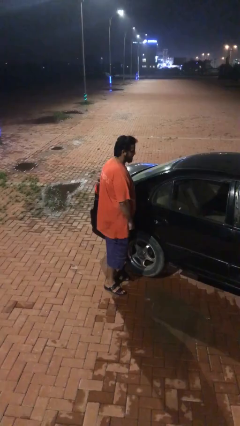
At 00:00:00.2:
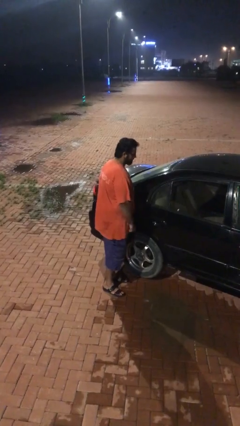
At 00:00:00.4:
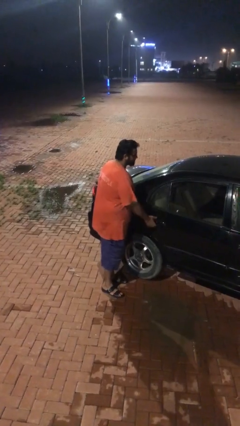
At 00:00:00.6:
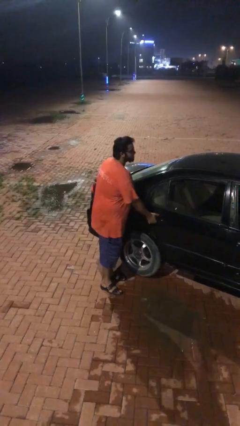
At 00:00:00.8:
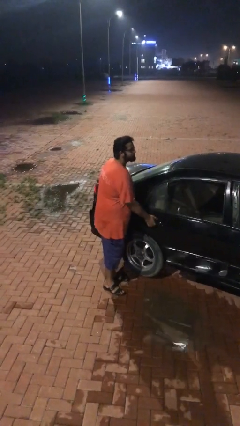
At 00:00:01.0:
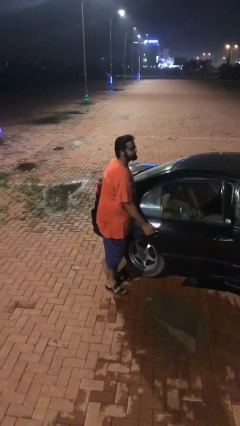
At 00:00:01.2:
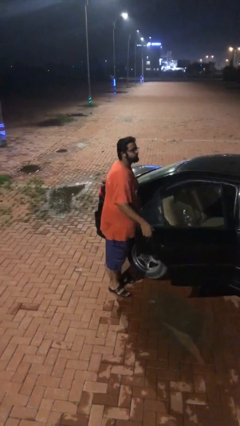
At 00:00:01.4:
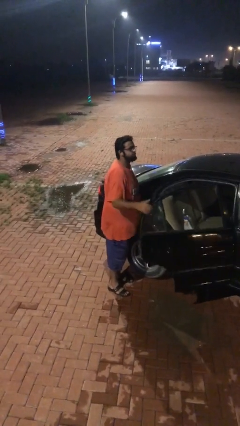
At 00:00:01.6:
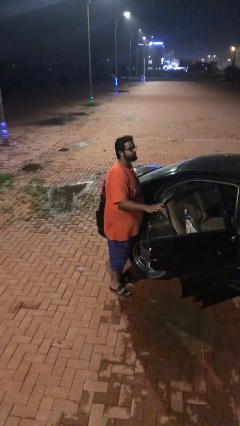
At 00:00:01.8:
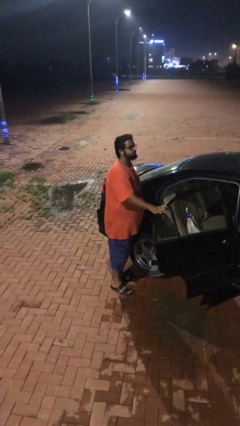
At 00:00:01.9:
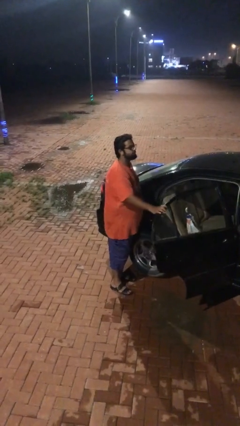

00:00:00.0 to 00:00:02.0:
person opens car door

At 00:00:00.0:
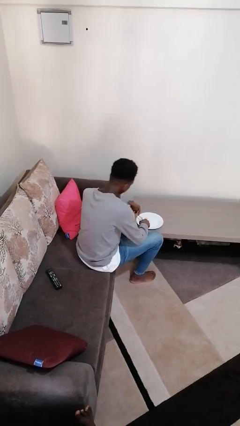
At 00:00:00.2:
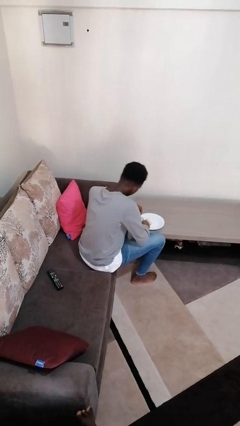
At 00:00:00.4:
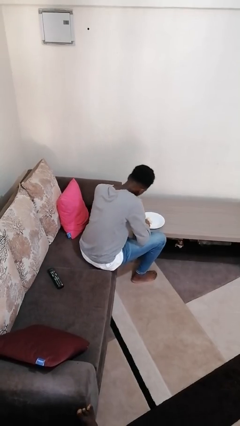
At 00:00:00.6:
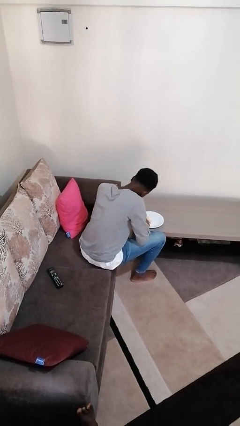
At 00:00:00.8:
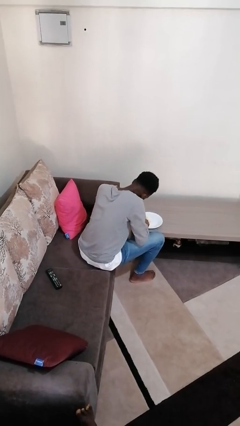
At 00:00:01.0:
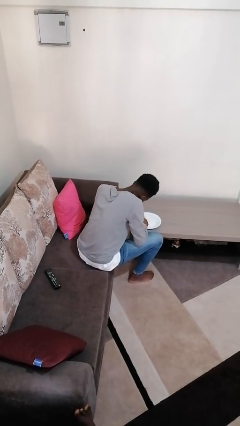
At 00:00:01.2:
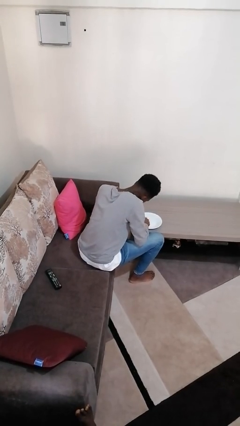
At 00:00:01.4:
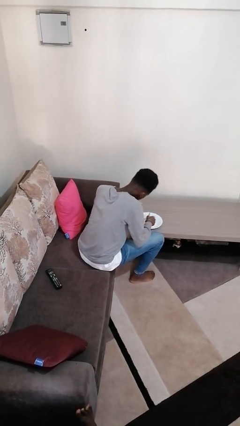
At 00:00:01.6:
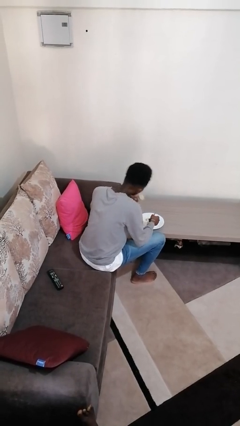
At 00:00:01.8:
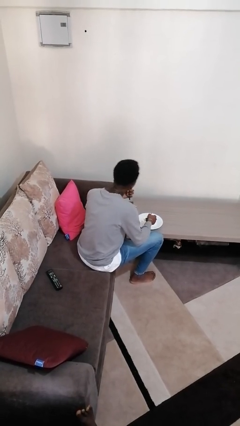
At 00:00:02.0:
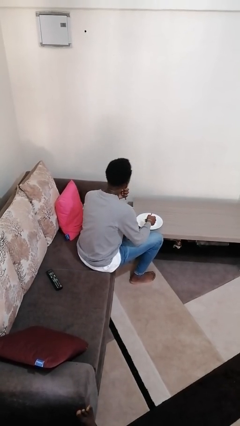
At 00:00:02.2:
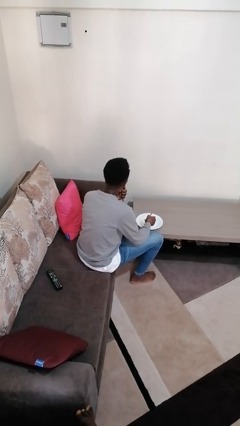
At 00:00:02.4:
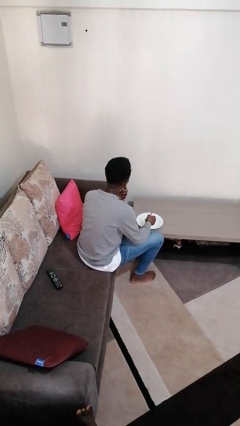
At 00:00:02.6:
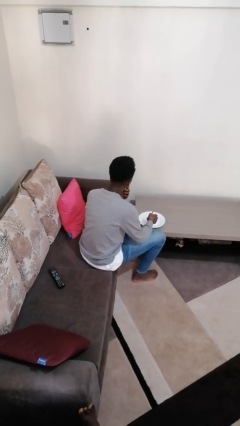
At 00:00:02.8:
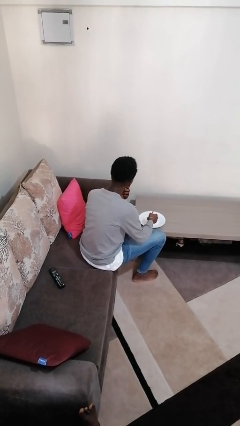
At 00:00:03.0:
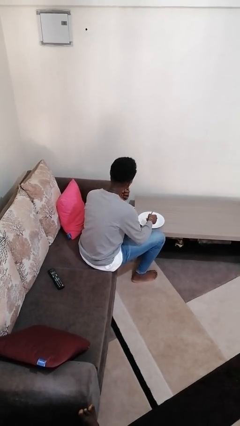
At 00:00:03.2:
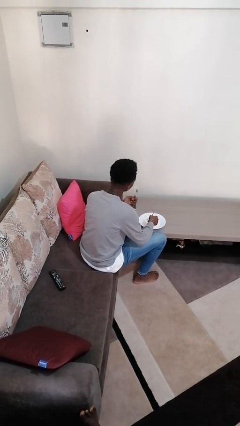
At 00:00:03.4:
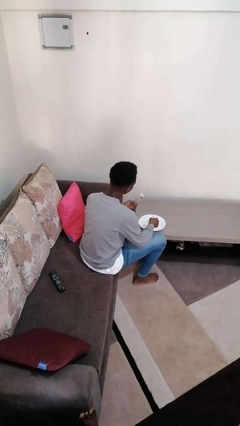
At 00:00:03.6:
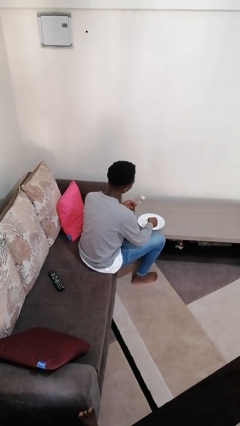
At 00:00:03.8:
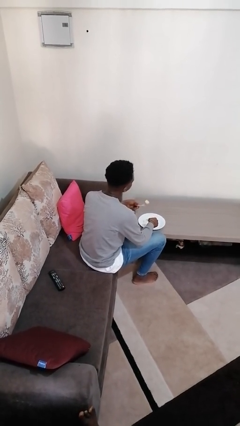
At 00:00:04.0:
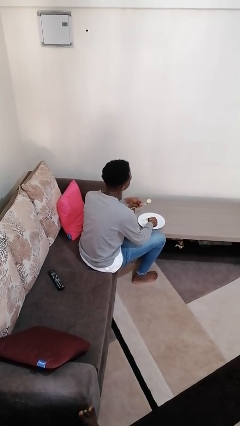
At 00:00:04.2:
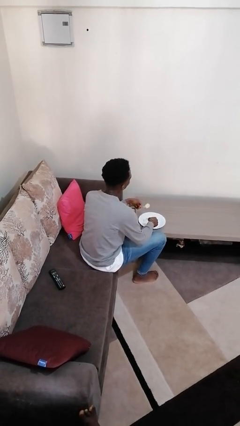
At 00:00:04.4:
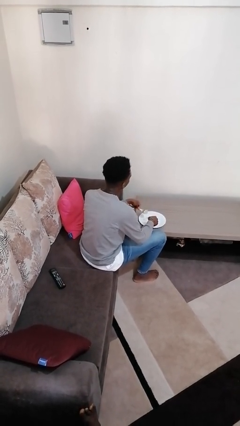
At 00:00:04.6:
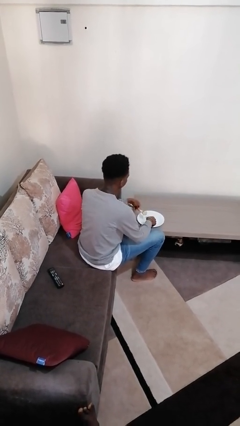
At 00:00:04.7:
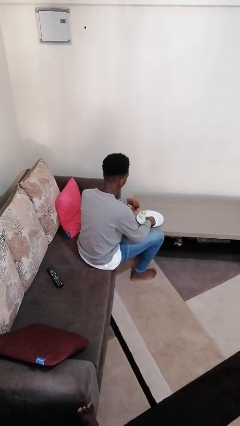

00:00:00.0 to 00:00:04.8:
person eats with utensil

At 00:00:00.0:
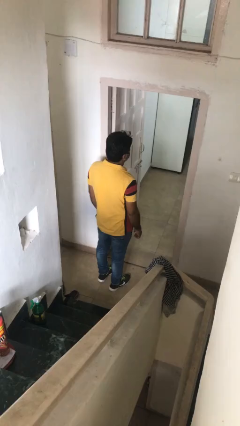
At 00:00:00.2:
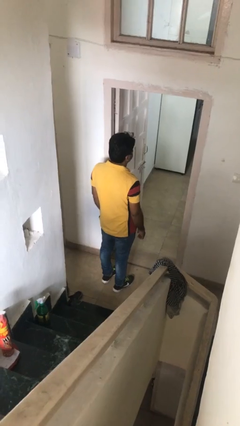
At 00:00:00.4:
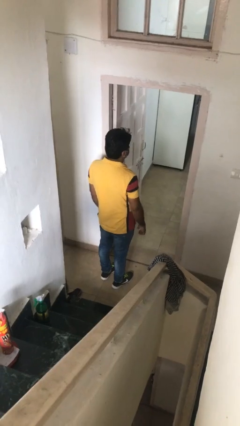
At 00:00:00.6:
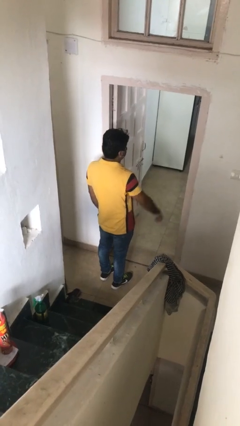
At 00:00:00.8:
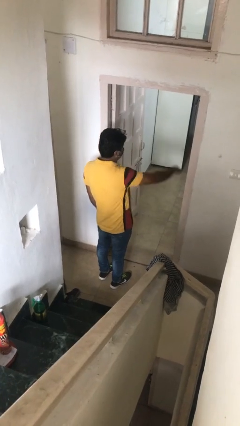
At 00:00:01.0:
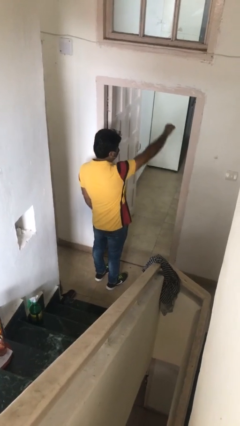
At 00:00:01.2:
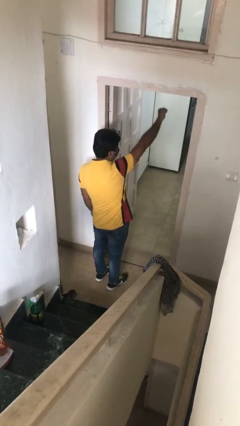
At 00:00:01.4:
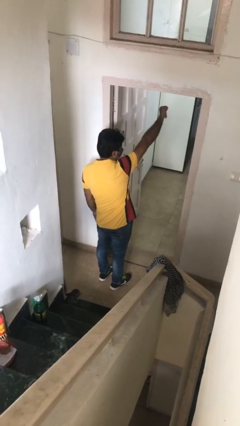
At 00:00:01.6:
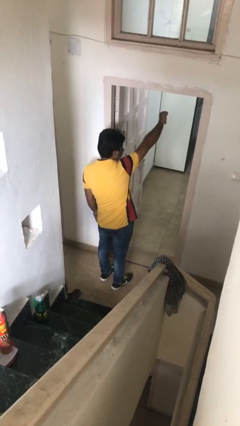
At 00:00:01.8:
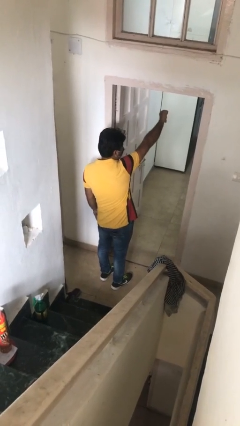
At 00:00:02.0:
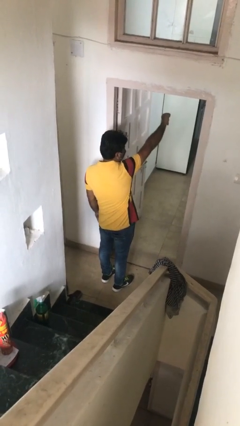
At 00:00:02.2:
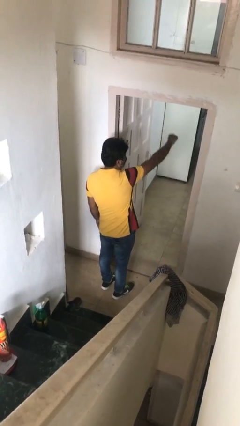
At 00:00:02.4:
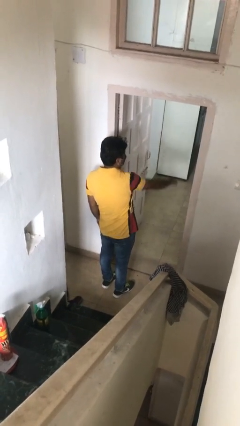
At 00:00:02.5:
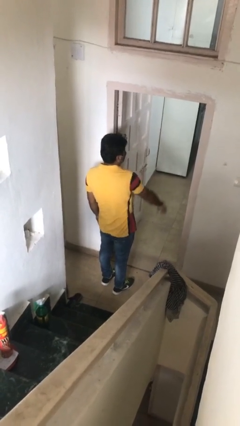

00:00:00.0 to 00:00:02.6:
person gestures thumbs down

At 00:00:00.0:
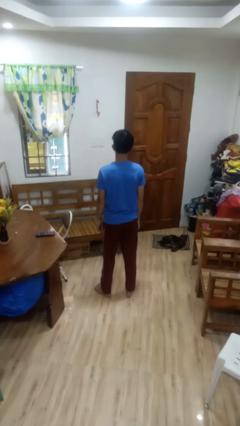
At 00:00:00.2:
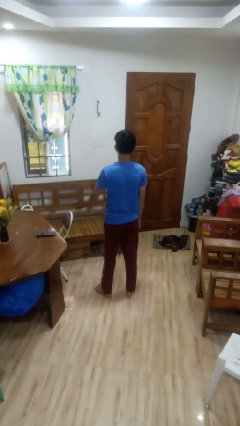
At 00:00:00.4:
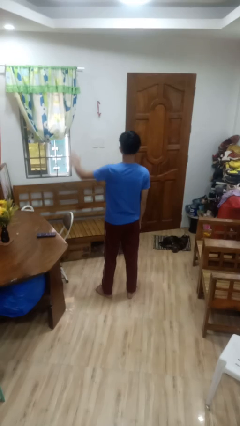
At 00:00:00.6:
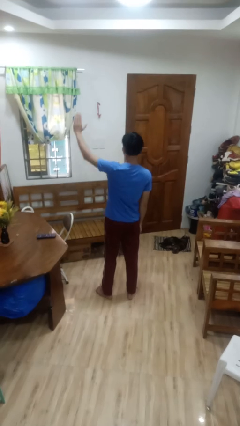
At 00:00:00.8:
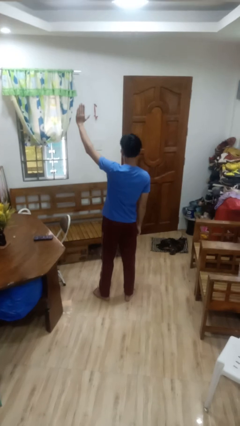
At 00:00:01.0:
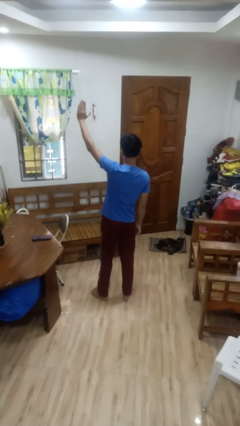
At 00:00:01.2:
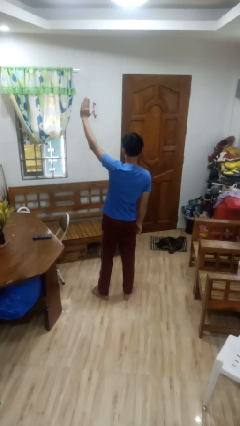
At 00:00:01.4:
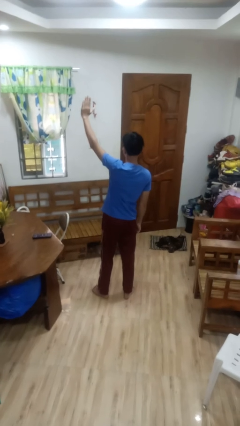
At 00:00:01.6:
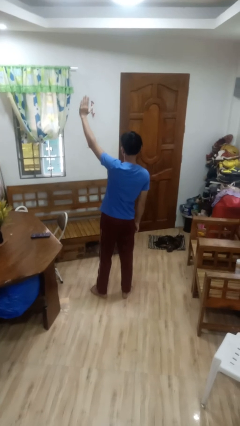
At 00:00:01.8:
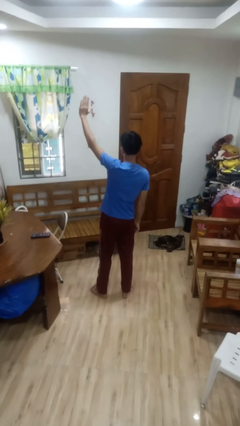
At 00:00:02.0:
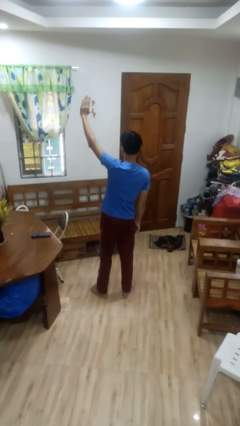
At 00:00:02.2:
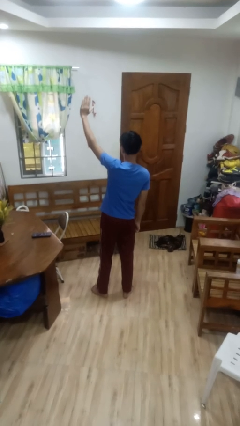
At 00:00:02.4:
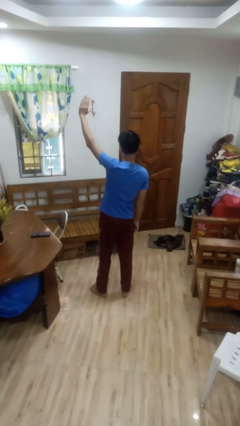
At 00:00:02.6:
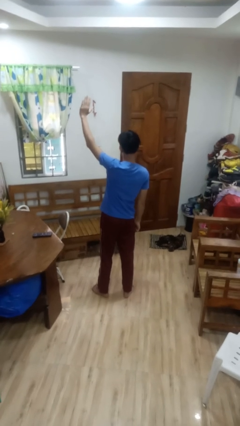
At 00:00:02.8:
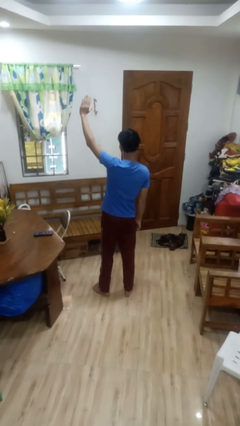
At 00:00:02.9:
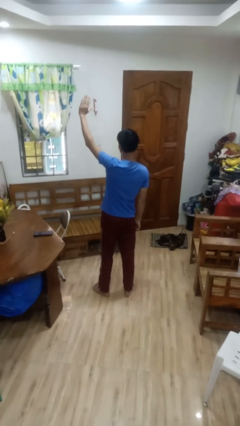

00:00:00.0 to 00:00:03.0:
person gestures raise hand

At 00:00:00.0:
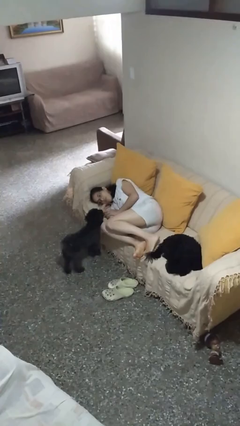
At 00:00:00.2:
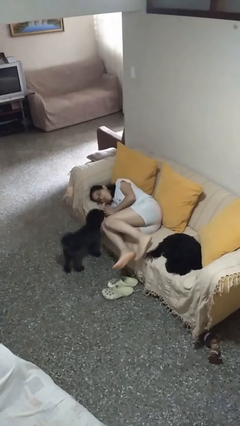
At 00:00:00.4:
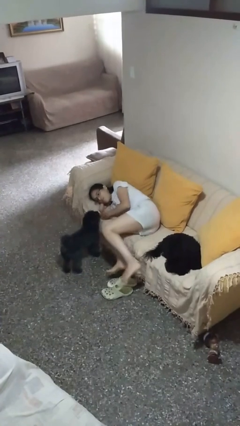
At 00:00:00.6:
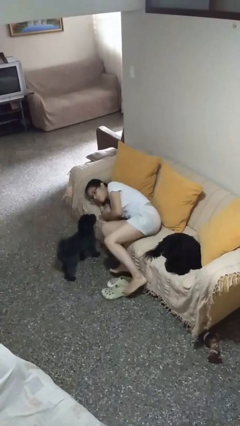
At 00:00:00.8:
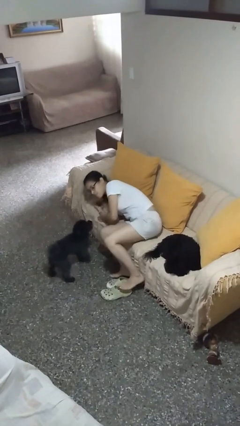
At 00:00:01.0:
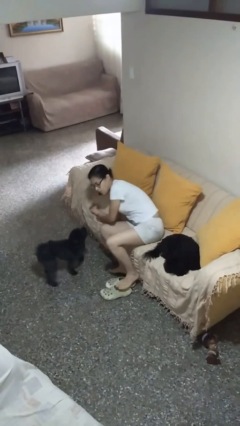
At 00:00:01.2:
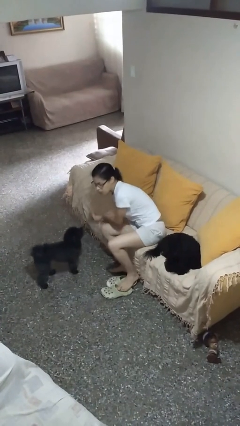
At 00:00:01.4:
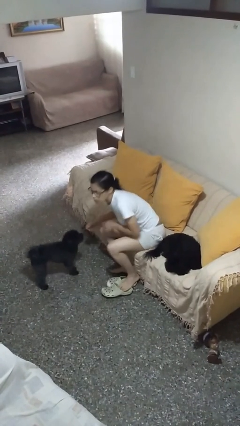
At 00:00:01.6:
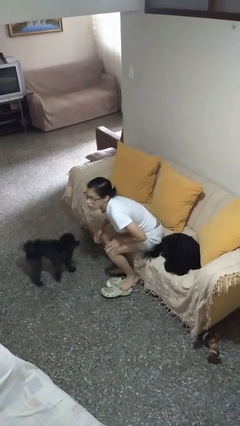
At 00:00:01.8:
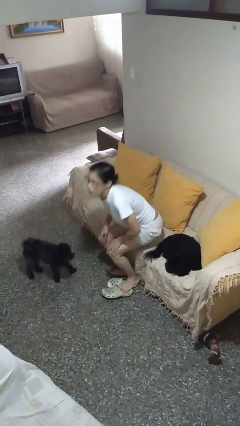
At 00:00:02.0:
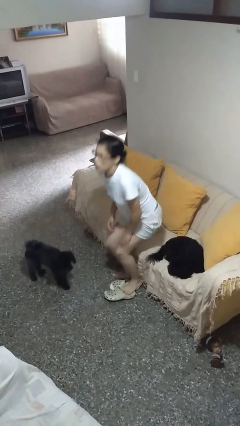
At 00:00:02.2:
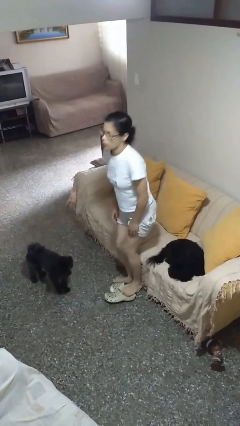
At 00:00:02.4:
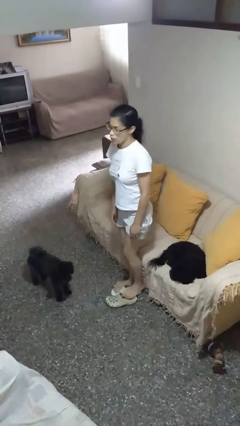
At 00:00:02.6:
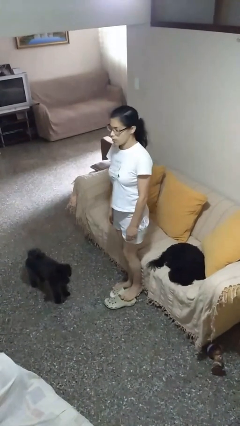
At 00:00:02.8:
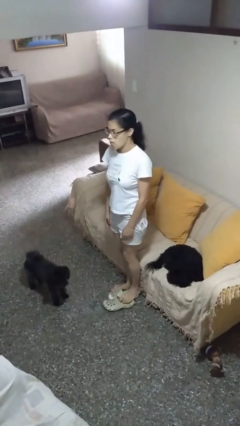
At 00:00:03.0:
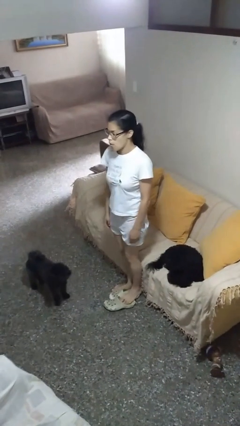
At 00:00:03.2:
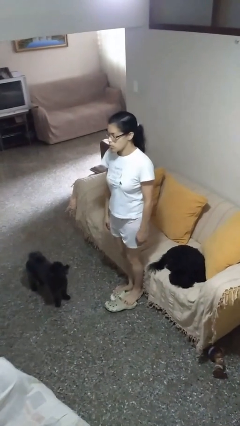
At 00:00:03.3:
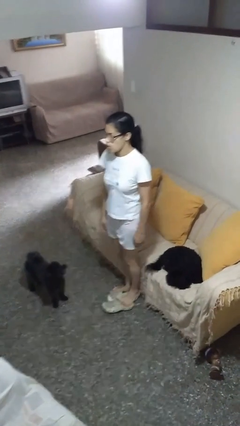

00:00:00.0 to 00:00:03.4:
person stands up

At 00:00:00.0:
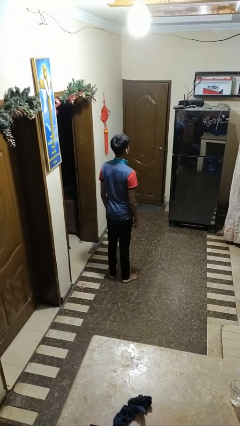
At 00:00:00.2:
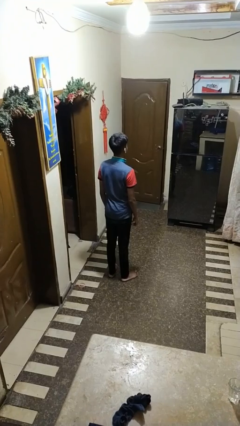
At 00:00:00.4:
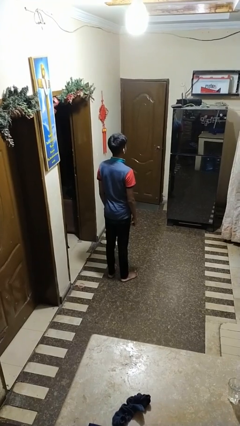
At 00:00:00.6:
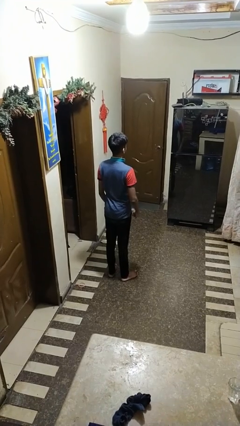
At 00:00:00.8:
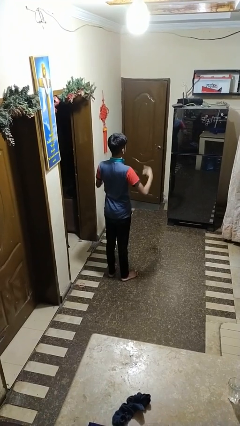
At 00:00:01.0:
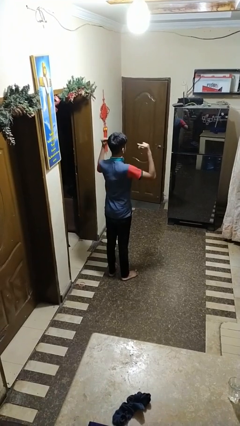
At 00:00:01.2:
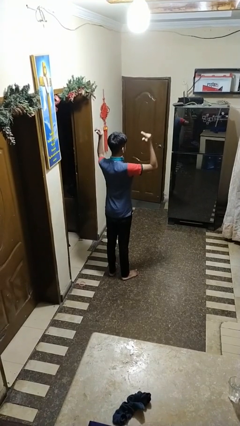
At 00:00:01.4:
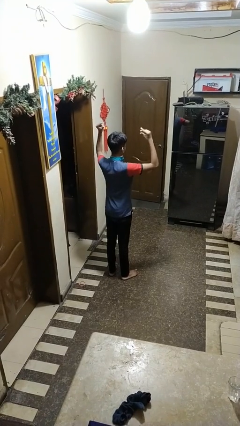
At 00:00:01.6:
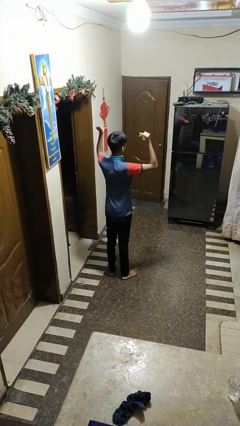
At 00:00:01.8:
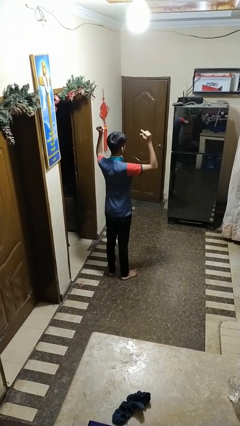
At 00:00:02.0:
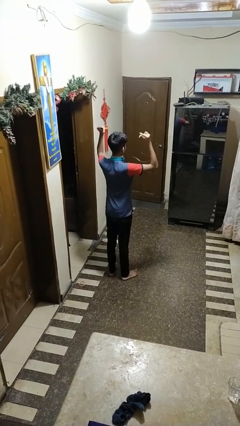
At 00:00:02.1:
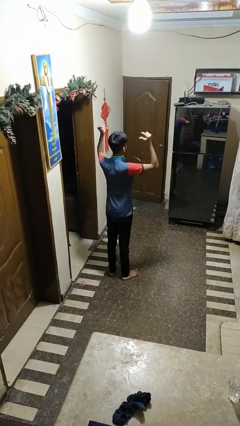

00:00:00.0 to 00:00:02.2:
person snaps fingers
